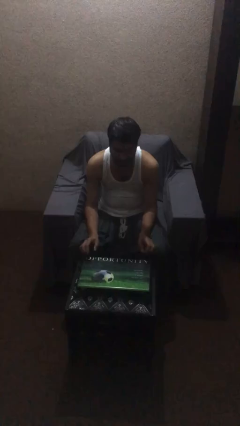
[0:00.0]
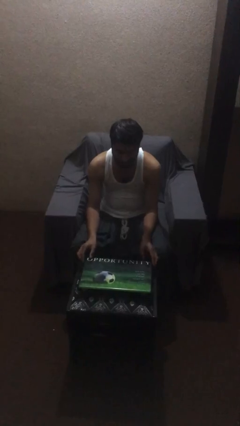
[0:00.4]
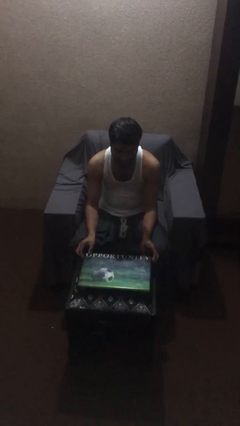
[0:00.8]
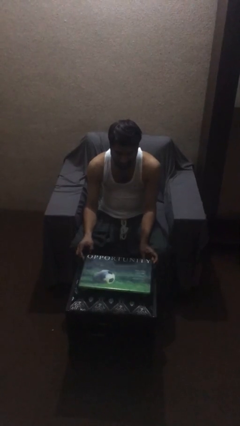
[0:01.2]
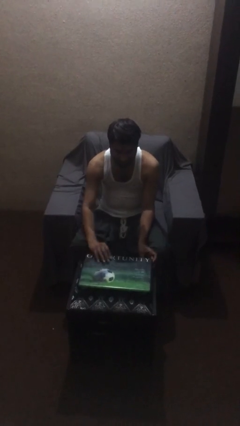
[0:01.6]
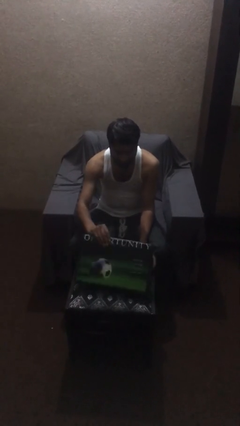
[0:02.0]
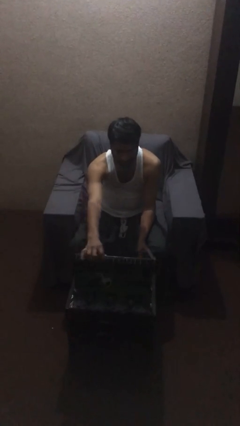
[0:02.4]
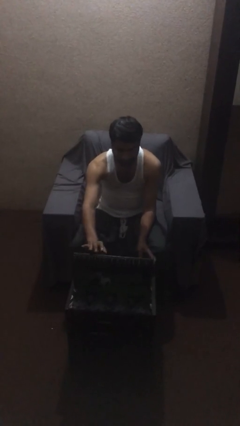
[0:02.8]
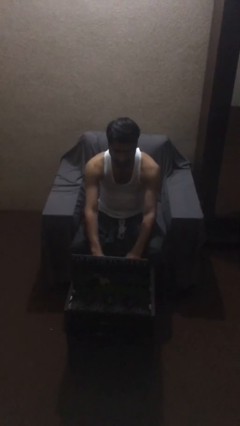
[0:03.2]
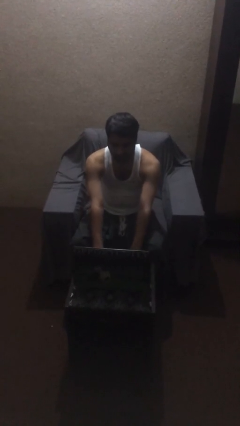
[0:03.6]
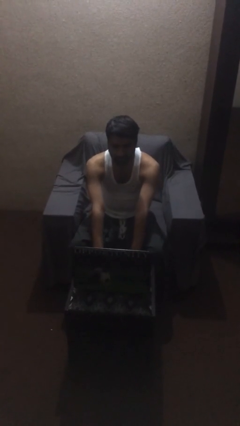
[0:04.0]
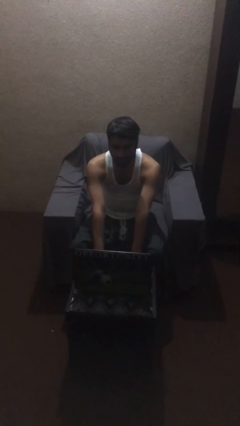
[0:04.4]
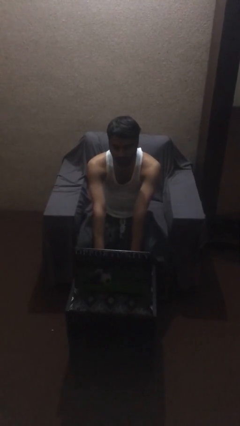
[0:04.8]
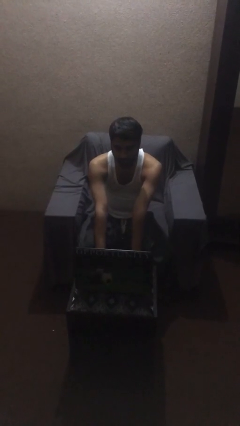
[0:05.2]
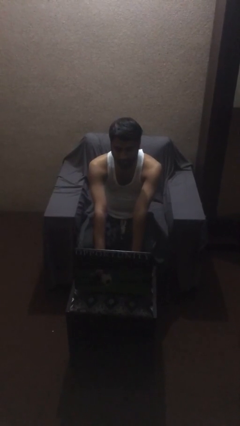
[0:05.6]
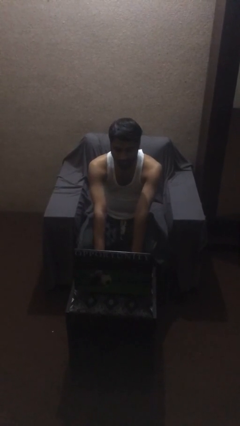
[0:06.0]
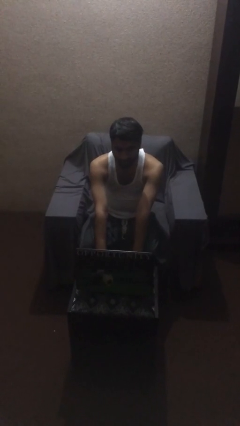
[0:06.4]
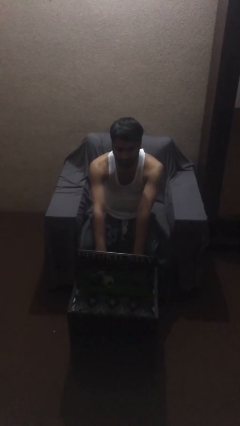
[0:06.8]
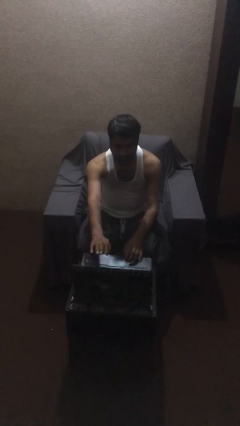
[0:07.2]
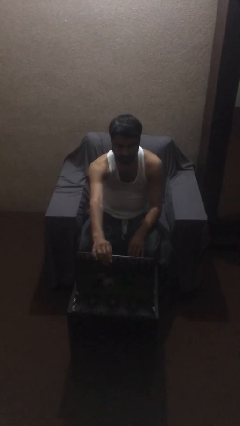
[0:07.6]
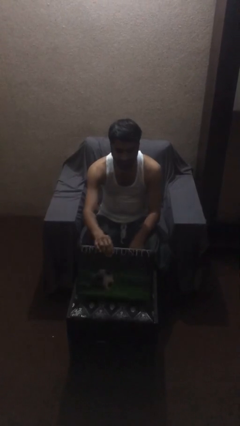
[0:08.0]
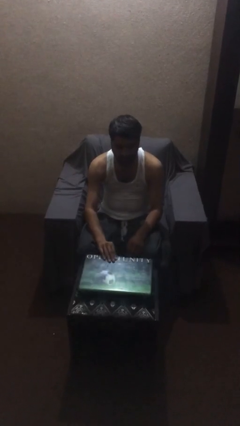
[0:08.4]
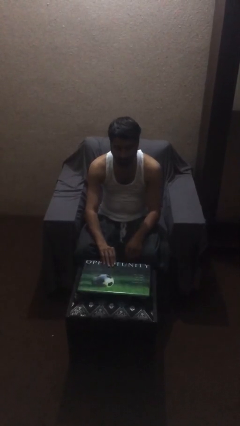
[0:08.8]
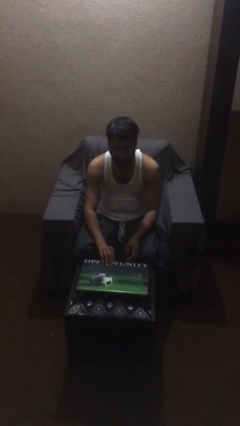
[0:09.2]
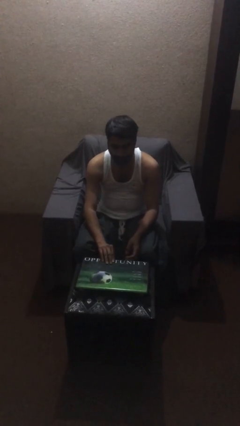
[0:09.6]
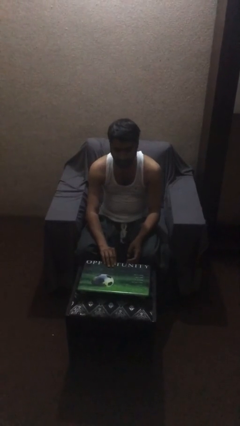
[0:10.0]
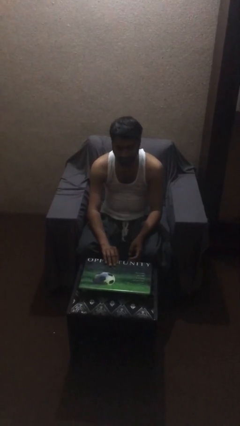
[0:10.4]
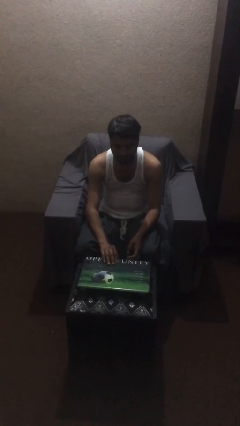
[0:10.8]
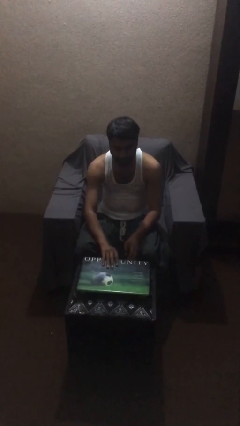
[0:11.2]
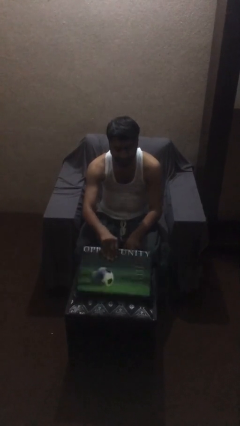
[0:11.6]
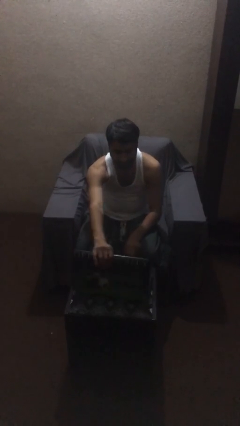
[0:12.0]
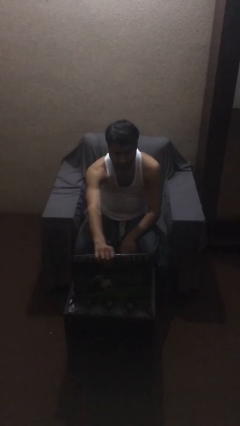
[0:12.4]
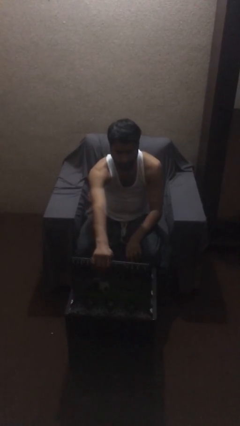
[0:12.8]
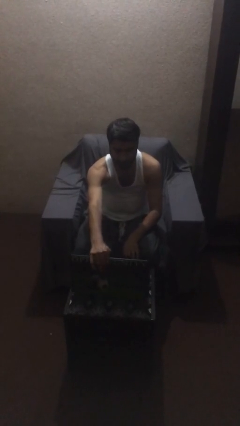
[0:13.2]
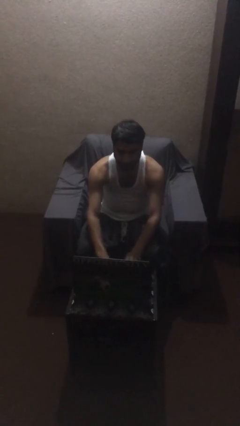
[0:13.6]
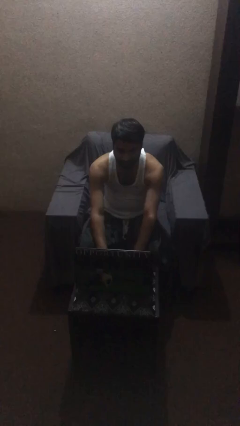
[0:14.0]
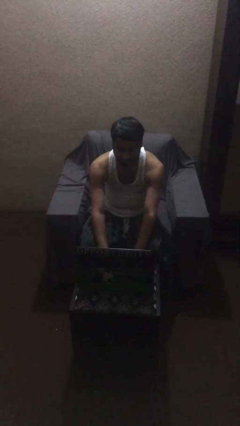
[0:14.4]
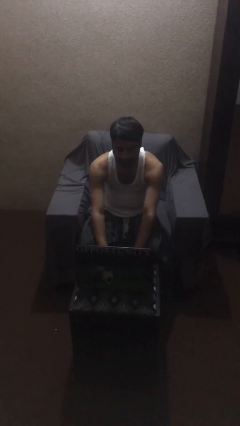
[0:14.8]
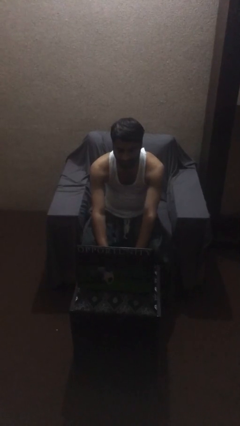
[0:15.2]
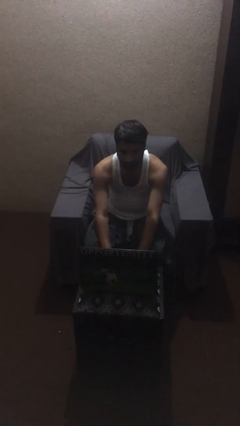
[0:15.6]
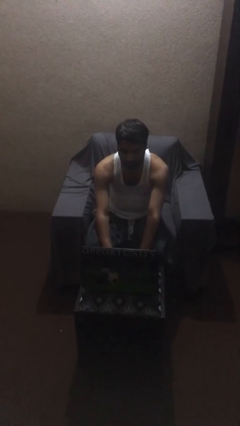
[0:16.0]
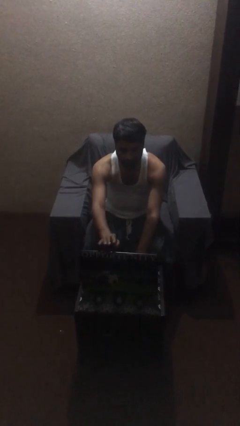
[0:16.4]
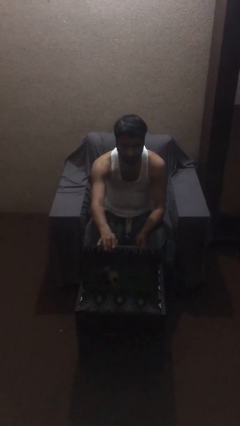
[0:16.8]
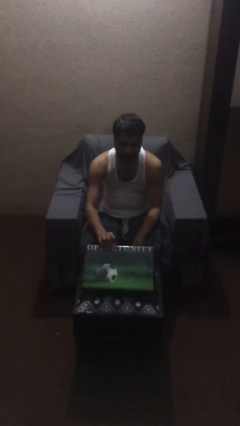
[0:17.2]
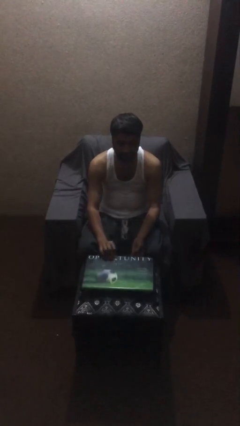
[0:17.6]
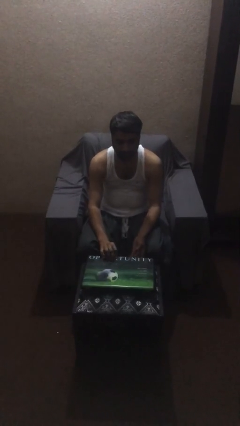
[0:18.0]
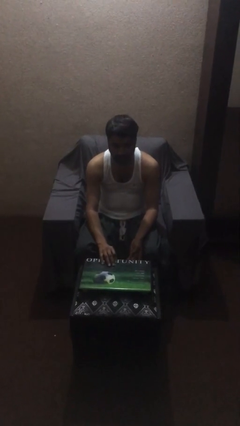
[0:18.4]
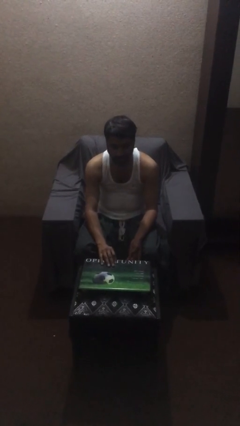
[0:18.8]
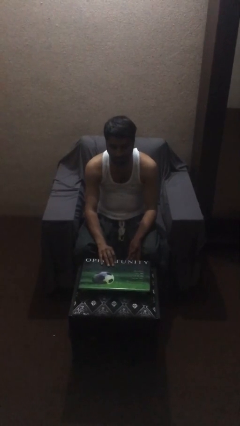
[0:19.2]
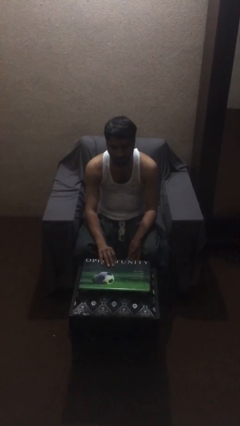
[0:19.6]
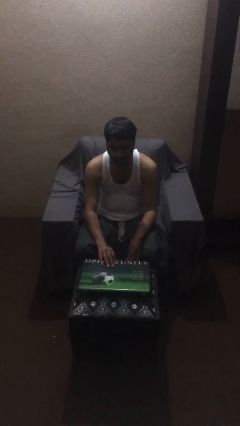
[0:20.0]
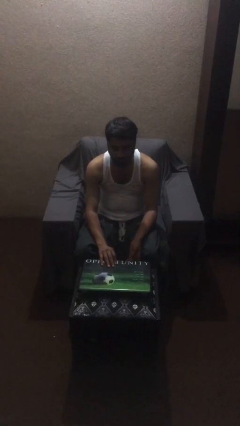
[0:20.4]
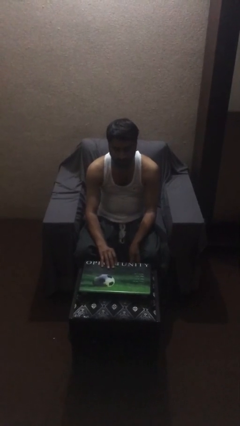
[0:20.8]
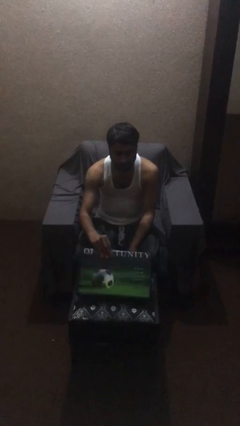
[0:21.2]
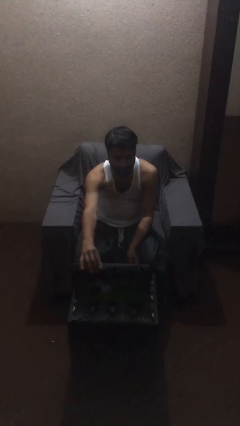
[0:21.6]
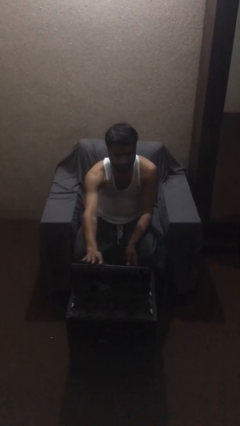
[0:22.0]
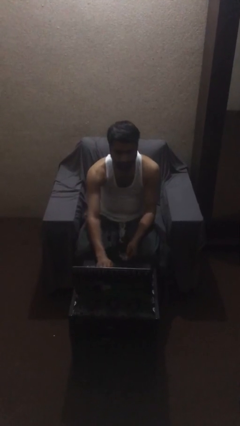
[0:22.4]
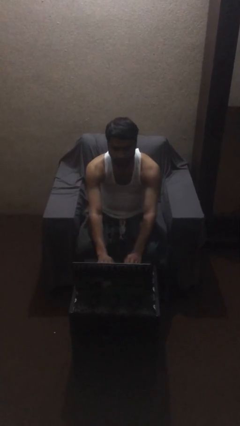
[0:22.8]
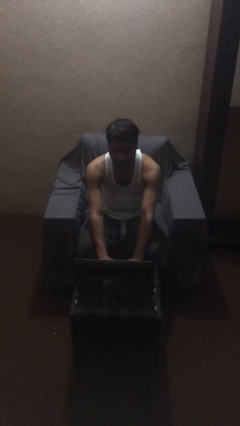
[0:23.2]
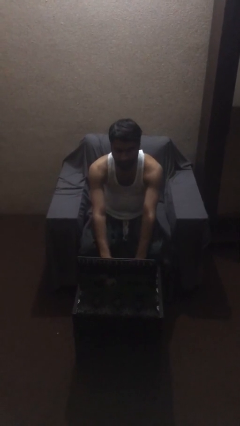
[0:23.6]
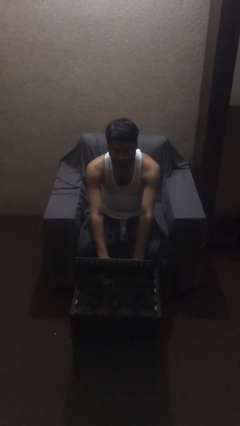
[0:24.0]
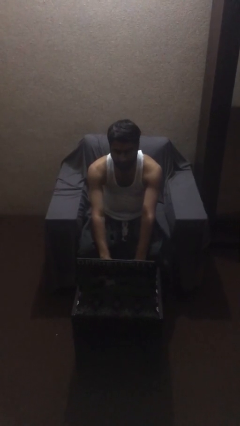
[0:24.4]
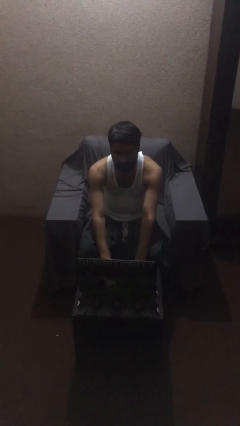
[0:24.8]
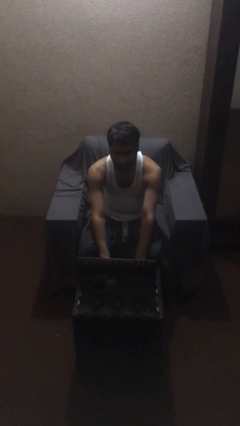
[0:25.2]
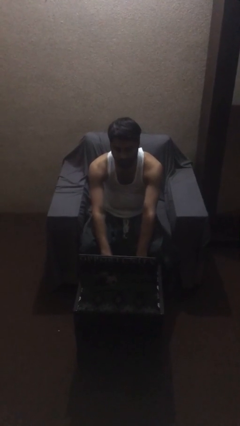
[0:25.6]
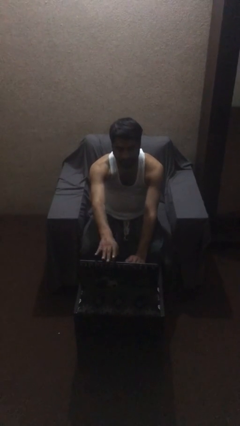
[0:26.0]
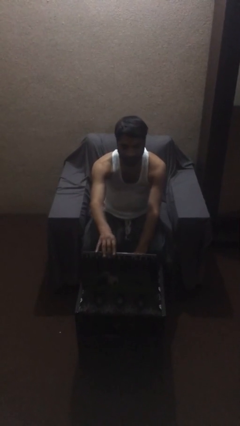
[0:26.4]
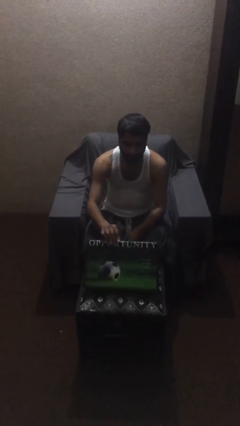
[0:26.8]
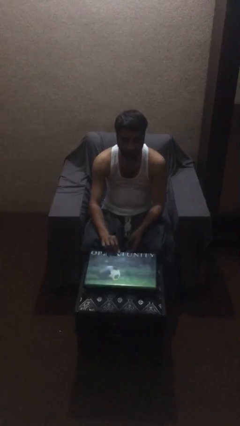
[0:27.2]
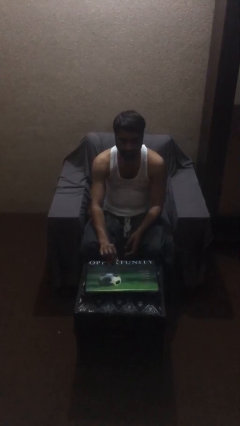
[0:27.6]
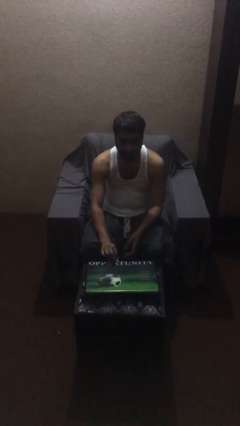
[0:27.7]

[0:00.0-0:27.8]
person interacts with laptop

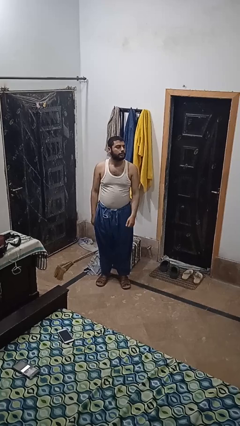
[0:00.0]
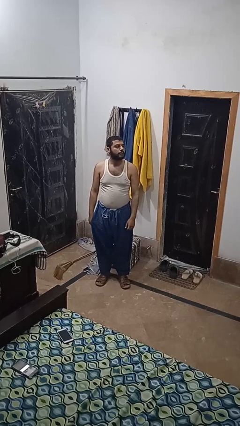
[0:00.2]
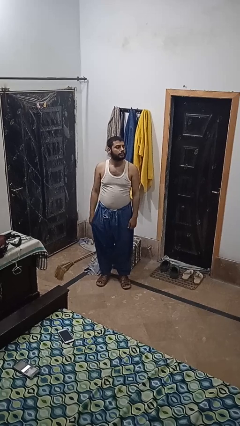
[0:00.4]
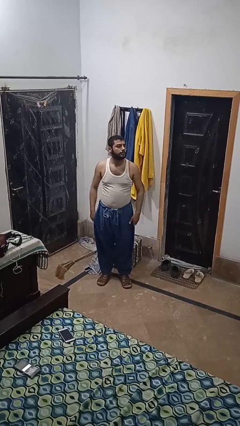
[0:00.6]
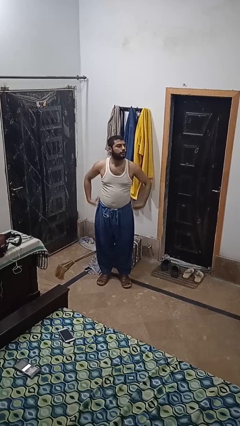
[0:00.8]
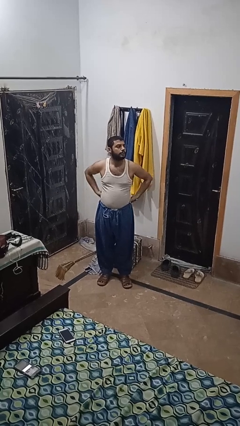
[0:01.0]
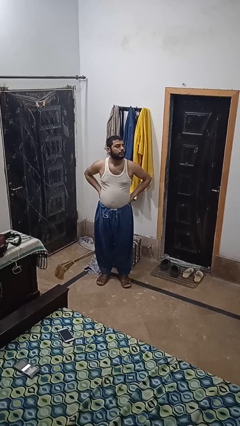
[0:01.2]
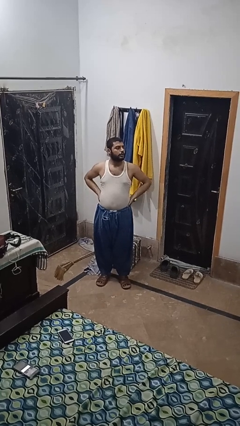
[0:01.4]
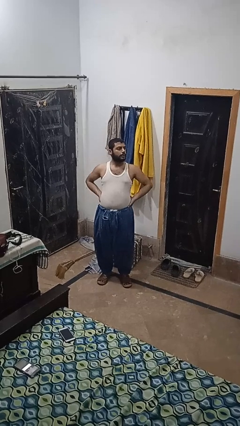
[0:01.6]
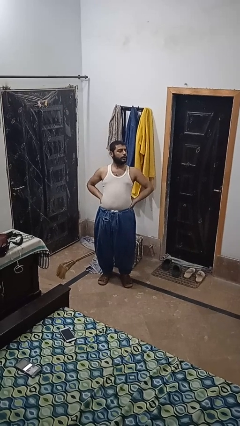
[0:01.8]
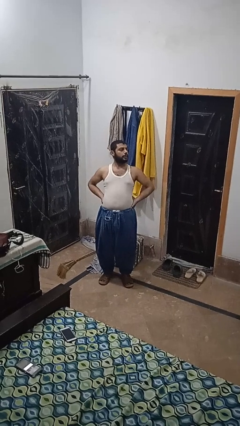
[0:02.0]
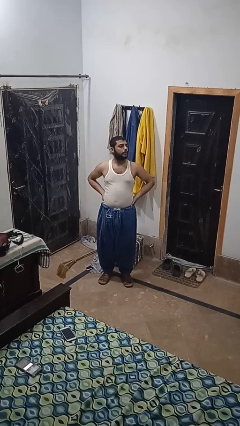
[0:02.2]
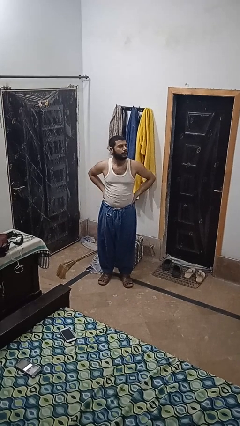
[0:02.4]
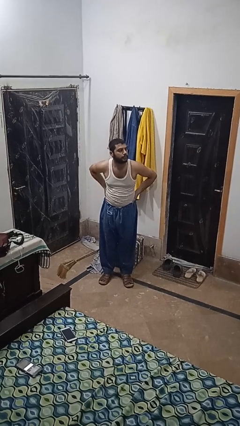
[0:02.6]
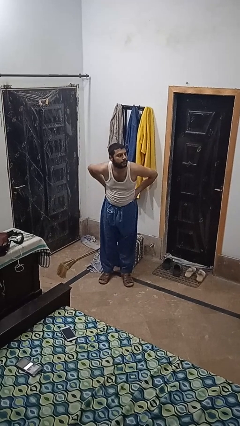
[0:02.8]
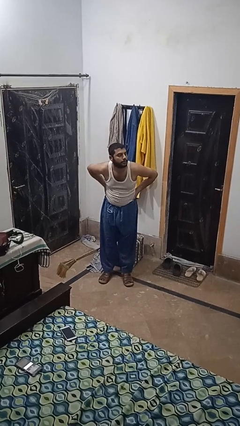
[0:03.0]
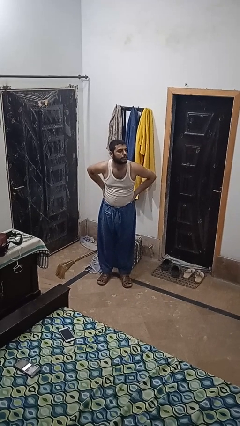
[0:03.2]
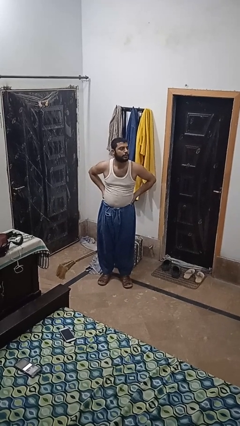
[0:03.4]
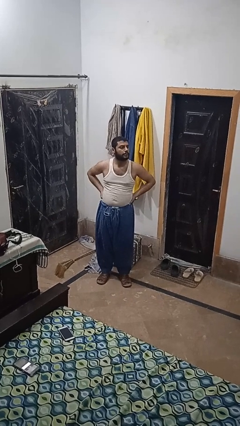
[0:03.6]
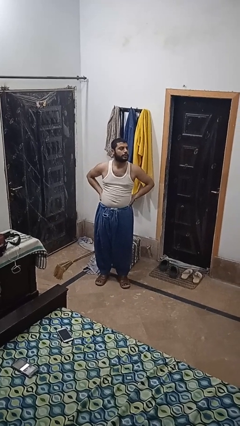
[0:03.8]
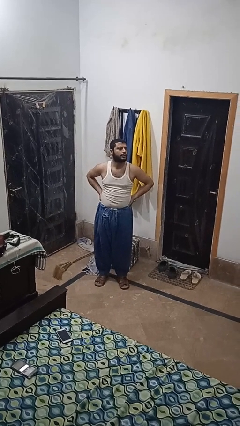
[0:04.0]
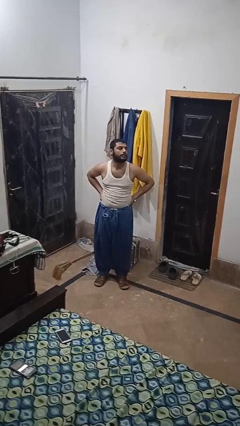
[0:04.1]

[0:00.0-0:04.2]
person stretches back
